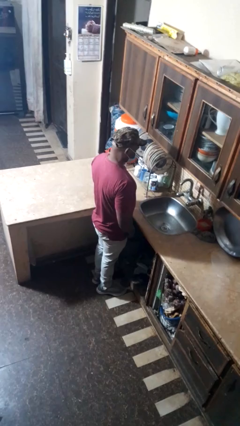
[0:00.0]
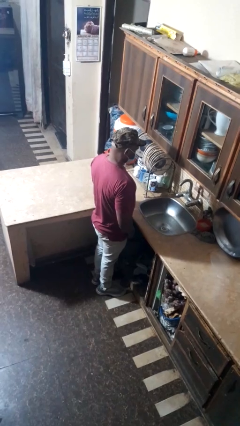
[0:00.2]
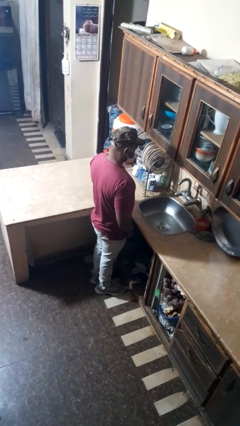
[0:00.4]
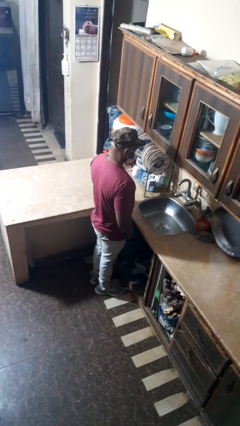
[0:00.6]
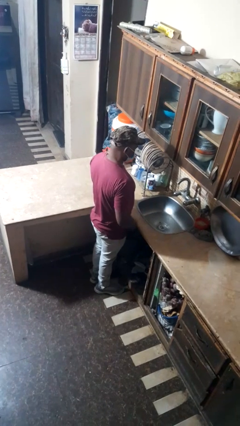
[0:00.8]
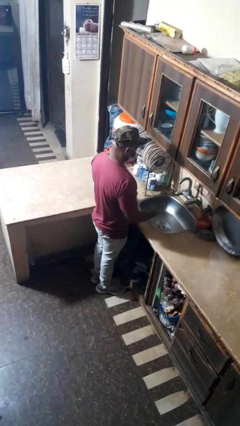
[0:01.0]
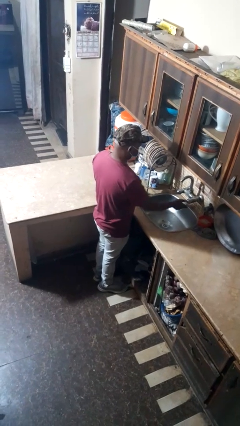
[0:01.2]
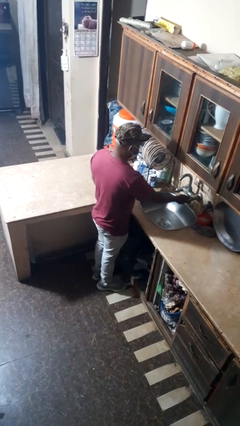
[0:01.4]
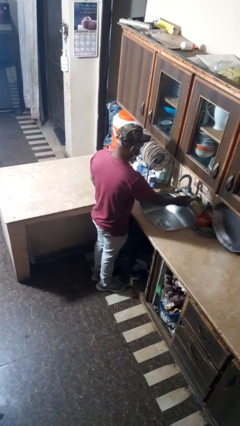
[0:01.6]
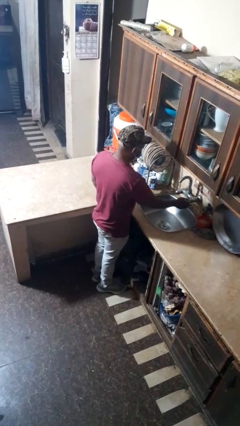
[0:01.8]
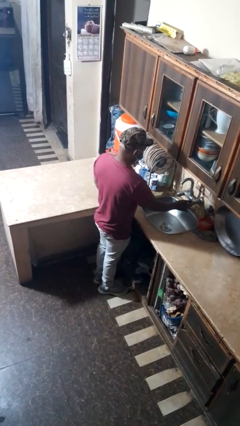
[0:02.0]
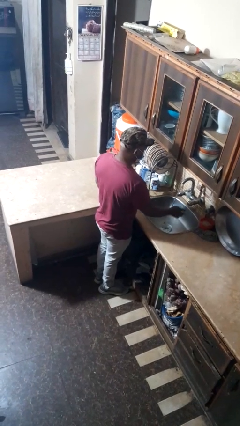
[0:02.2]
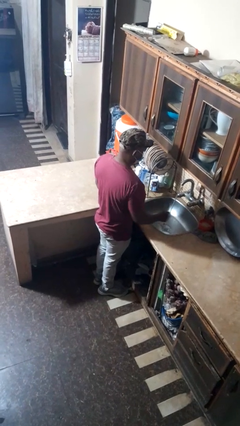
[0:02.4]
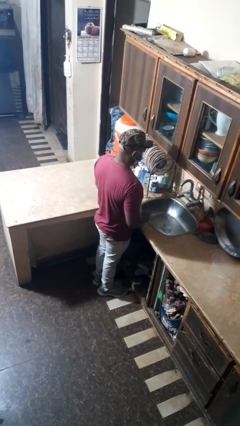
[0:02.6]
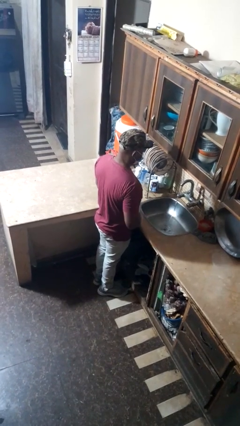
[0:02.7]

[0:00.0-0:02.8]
person turns on faucet

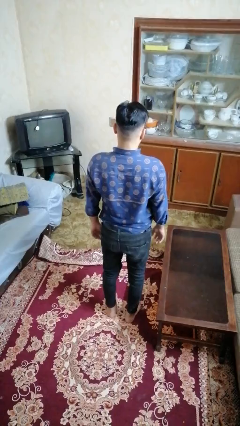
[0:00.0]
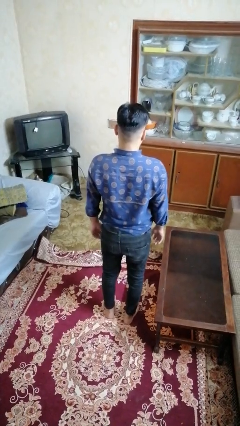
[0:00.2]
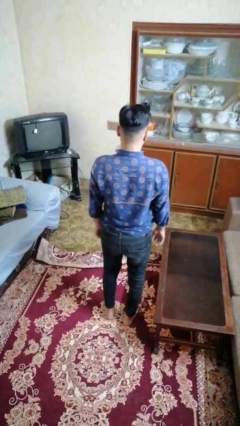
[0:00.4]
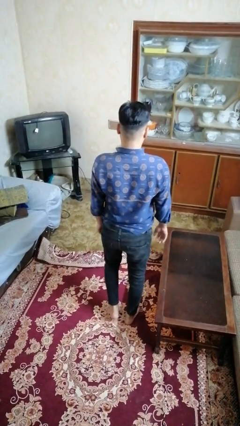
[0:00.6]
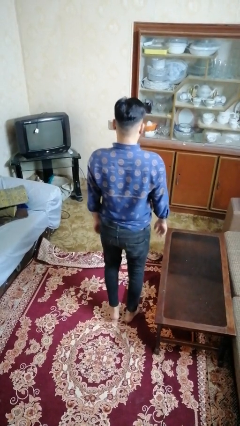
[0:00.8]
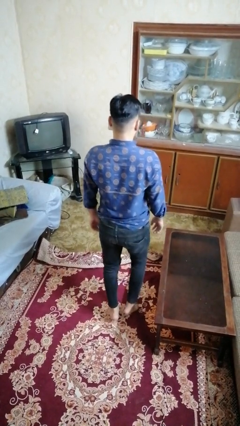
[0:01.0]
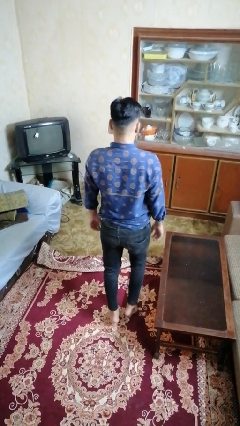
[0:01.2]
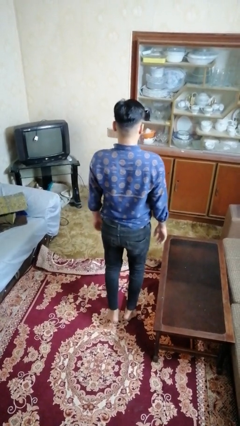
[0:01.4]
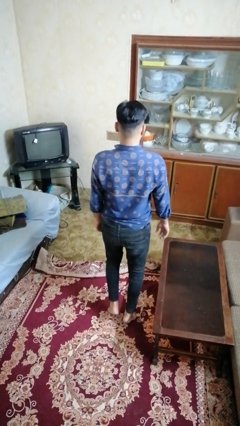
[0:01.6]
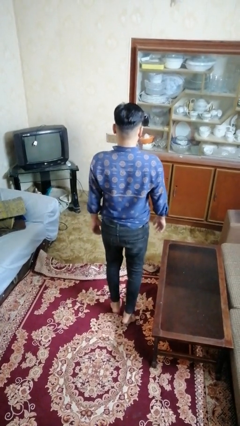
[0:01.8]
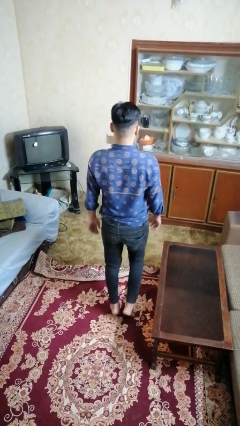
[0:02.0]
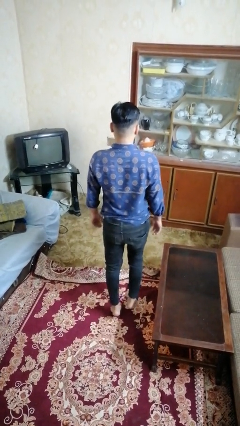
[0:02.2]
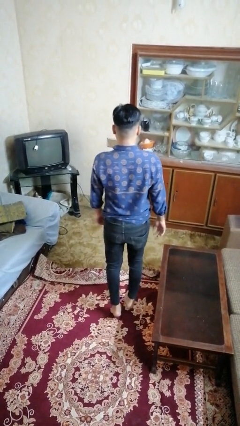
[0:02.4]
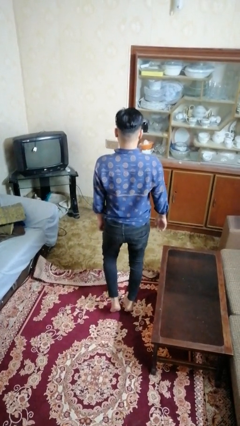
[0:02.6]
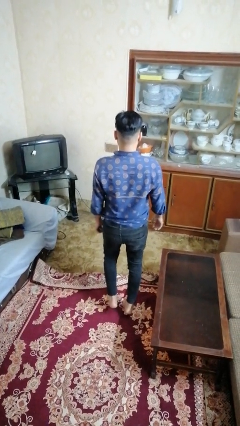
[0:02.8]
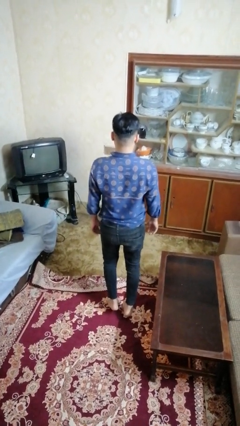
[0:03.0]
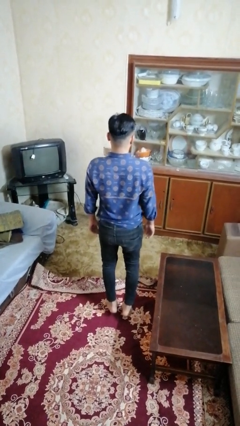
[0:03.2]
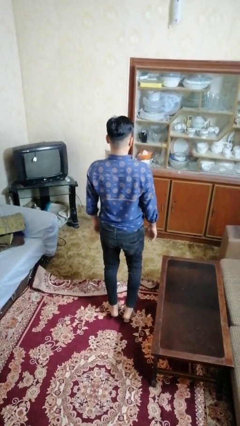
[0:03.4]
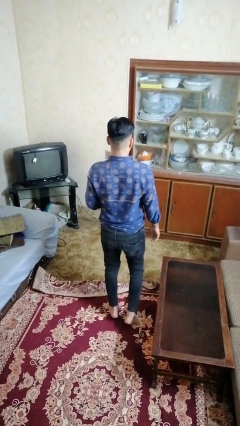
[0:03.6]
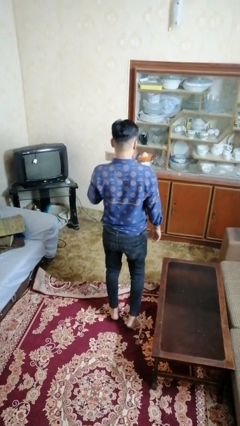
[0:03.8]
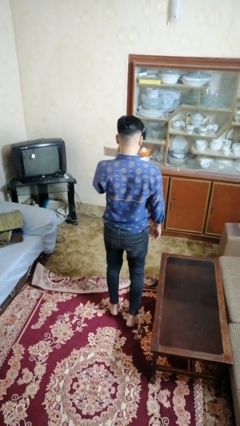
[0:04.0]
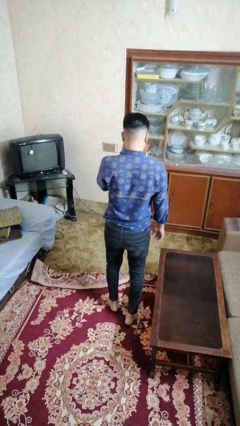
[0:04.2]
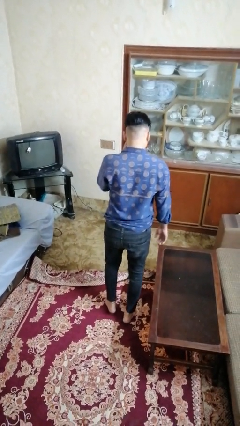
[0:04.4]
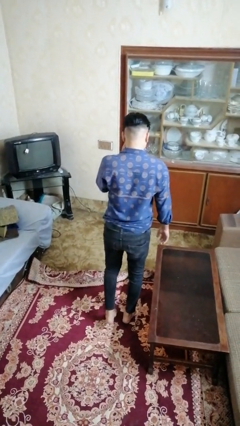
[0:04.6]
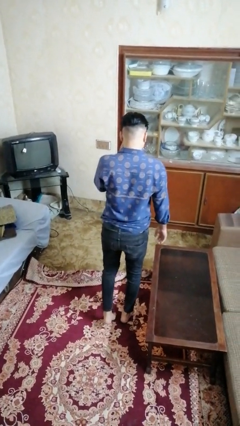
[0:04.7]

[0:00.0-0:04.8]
person walks tiptoe

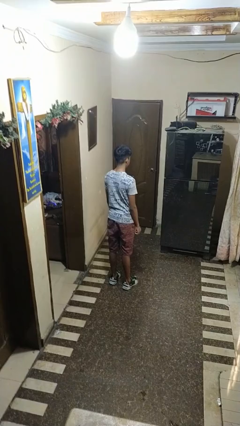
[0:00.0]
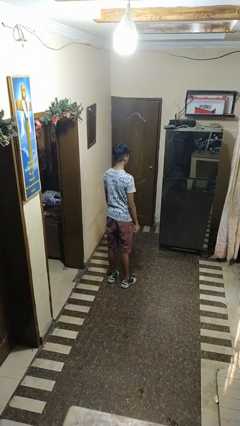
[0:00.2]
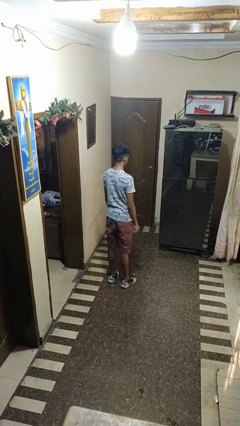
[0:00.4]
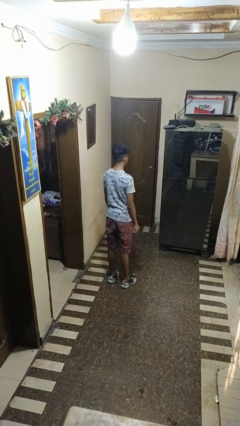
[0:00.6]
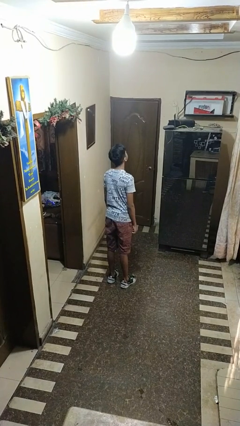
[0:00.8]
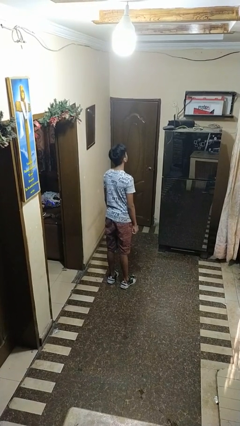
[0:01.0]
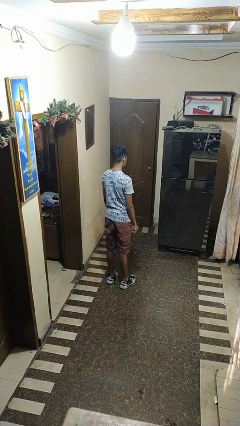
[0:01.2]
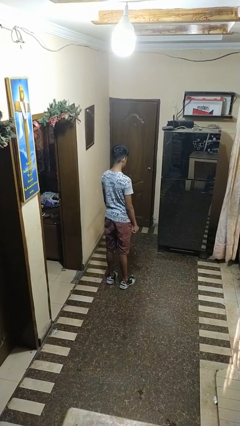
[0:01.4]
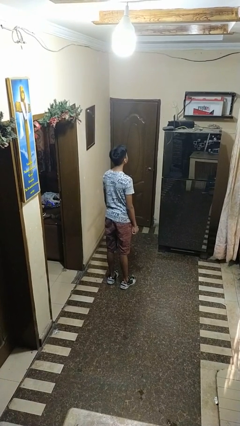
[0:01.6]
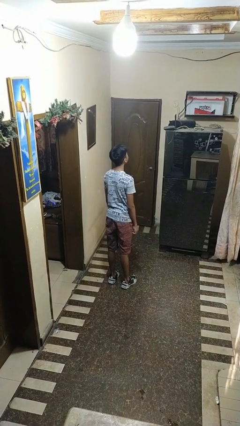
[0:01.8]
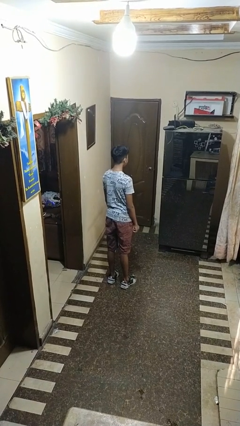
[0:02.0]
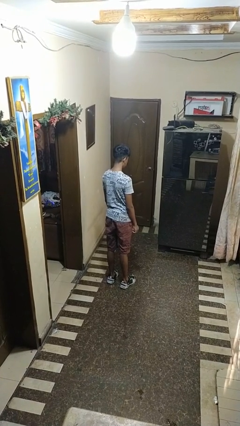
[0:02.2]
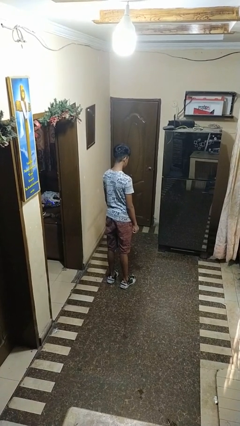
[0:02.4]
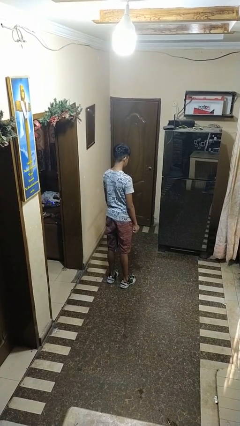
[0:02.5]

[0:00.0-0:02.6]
person shakes head

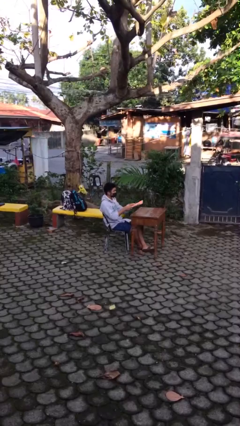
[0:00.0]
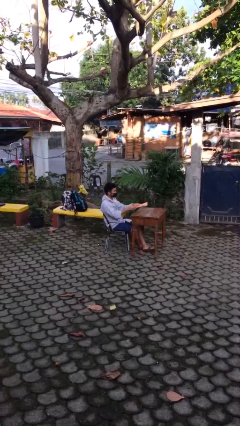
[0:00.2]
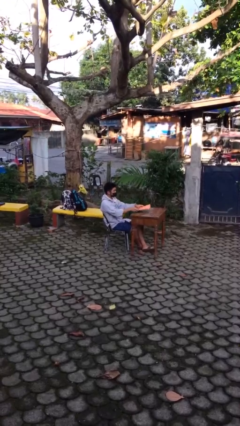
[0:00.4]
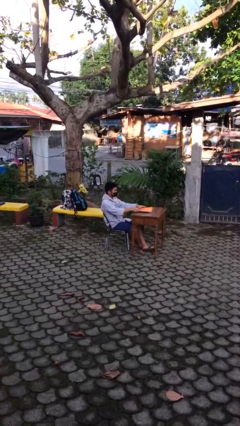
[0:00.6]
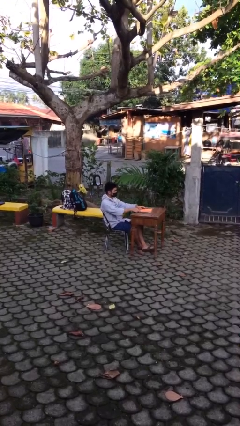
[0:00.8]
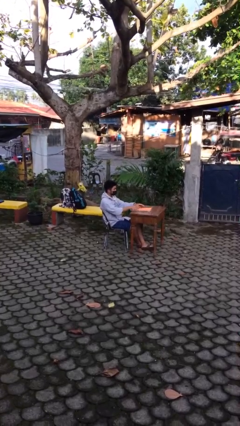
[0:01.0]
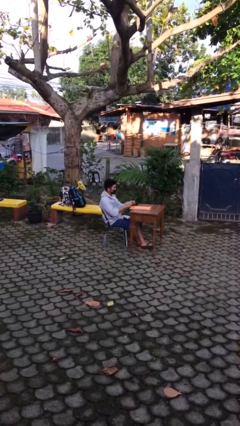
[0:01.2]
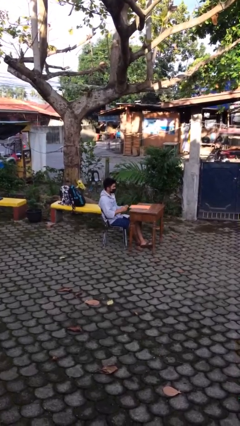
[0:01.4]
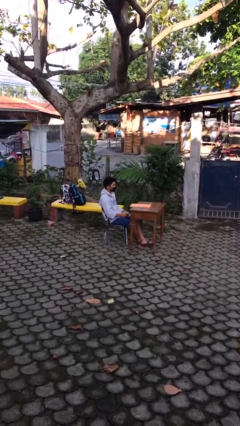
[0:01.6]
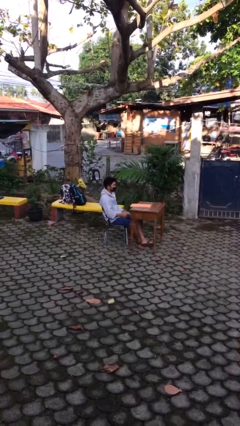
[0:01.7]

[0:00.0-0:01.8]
person puts down object on table

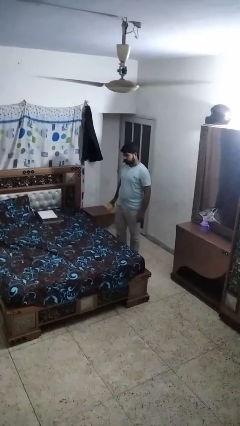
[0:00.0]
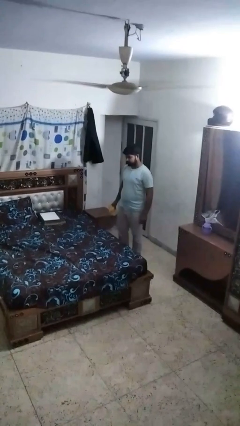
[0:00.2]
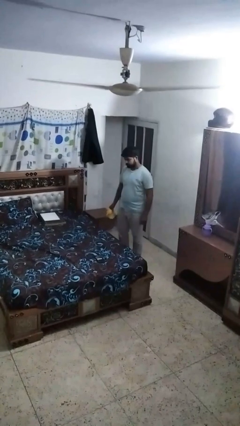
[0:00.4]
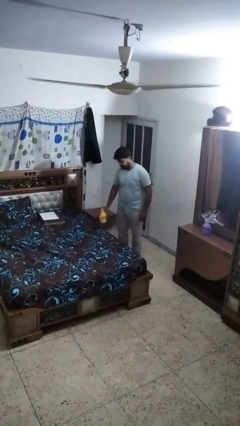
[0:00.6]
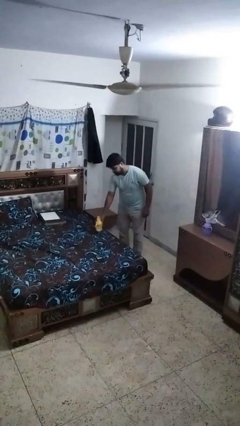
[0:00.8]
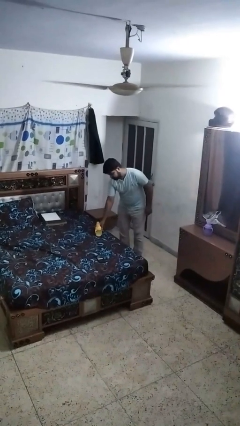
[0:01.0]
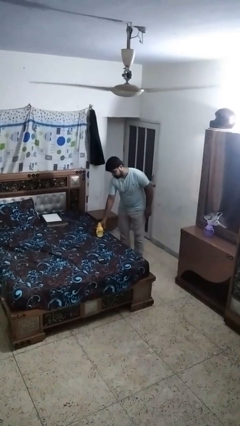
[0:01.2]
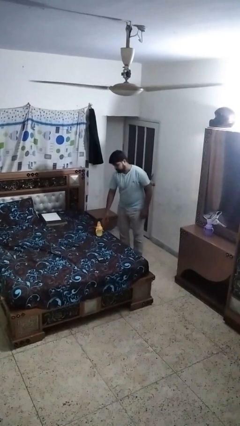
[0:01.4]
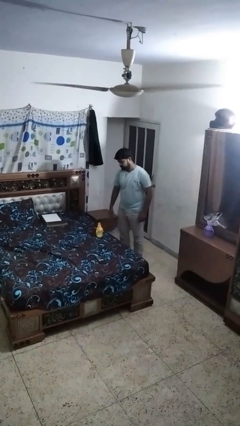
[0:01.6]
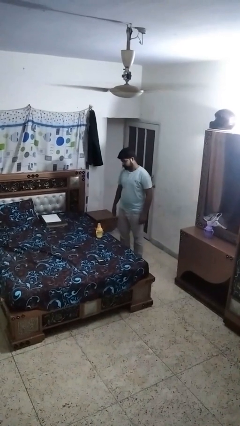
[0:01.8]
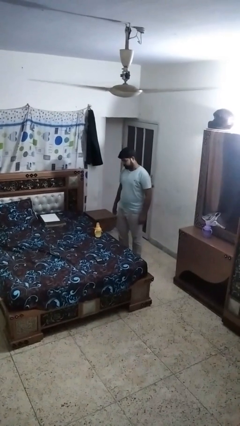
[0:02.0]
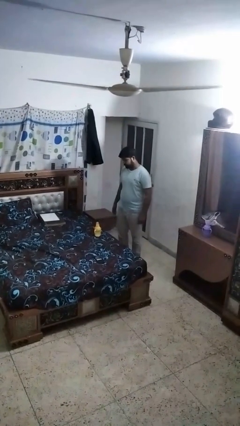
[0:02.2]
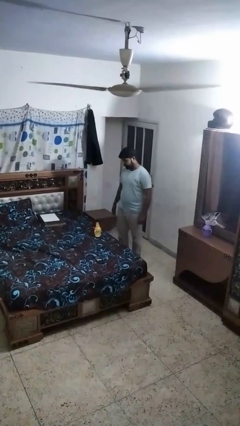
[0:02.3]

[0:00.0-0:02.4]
person puts down object on bed

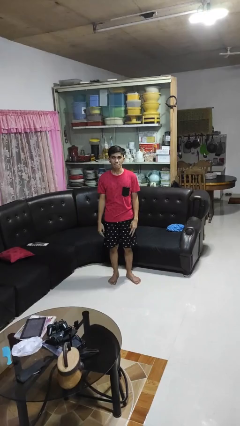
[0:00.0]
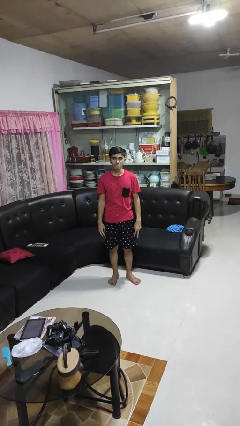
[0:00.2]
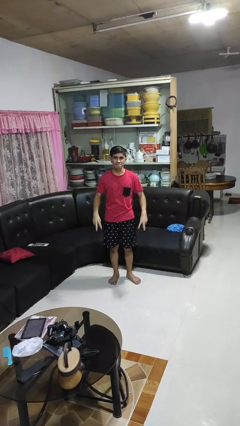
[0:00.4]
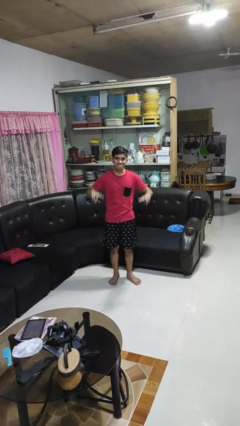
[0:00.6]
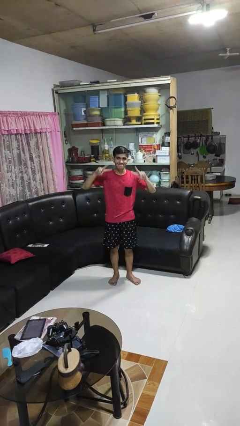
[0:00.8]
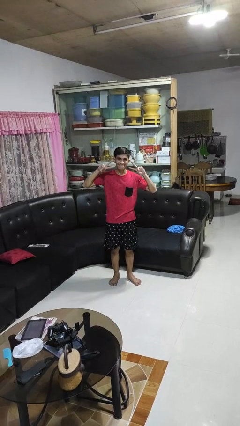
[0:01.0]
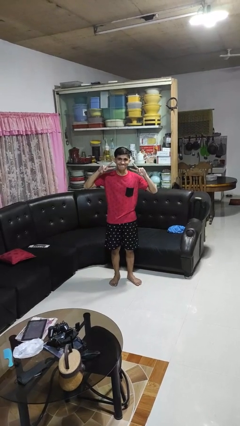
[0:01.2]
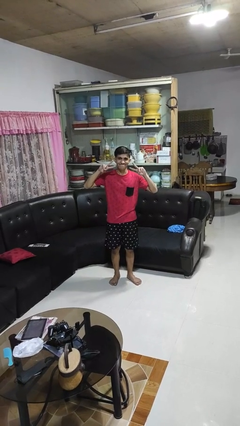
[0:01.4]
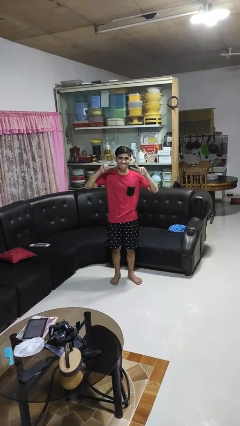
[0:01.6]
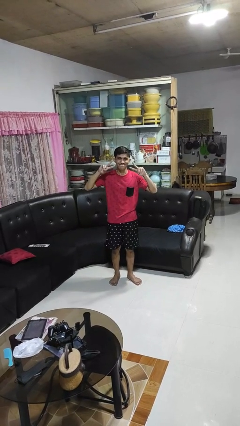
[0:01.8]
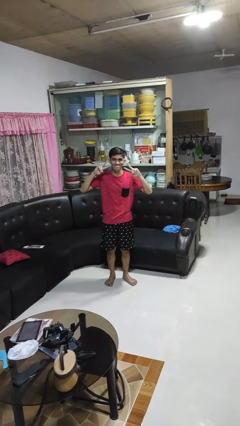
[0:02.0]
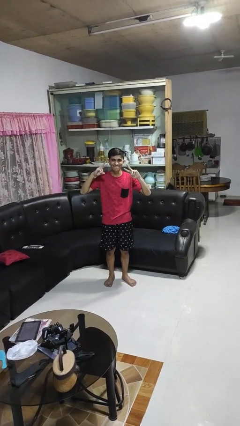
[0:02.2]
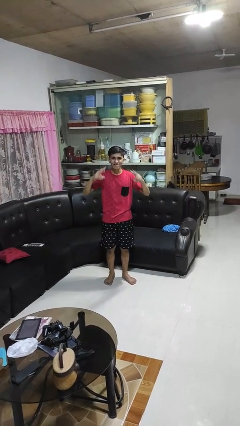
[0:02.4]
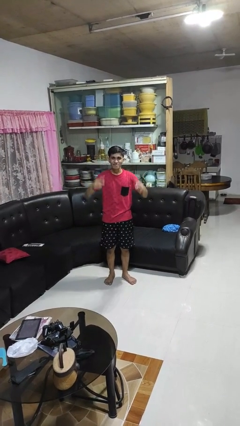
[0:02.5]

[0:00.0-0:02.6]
person gestures peace

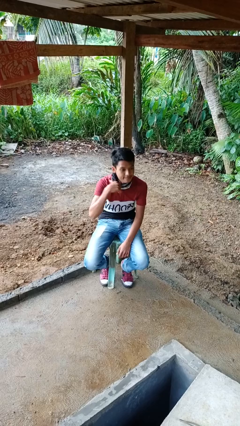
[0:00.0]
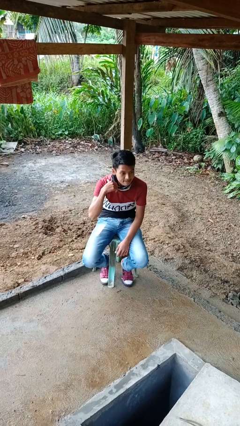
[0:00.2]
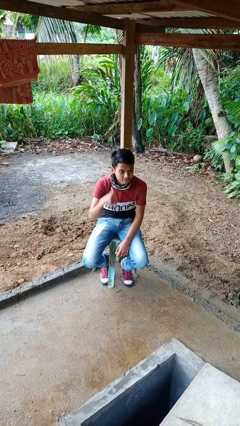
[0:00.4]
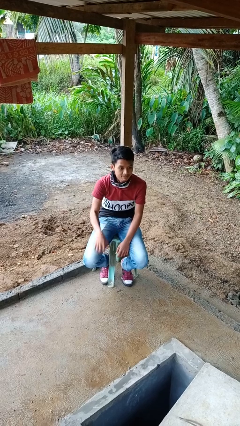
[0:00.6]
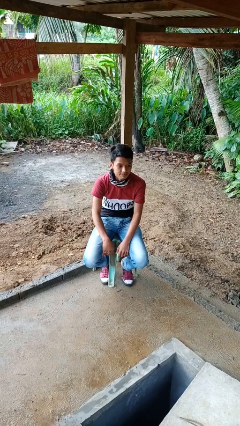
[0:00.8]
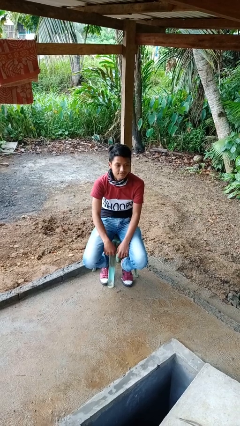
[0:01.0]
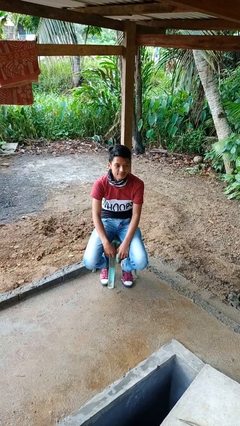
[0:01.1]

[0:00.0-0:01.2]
person gestures cut
